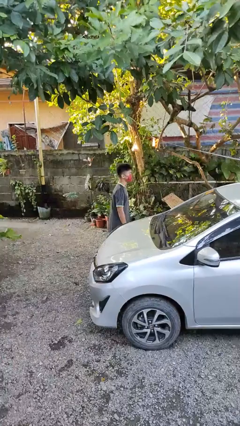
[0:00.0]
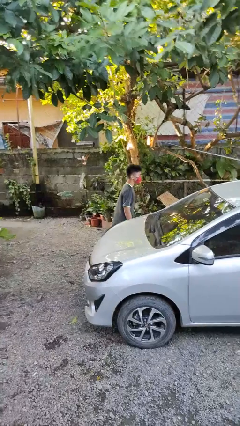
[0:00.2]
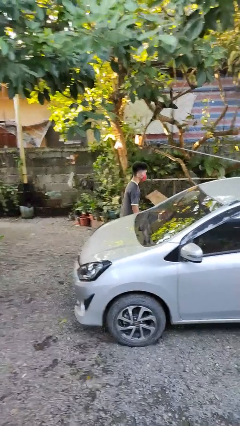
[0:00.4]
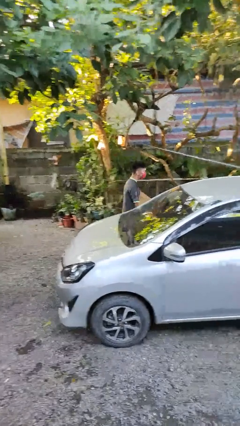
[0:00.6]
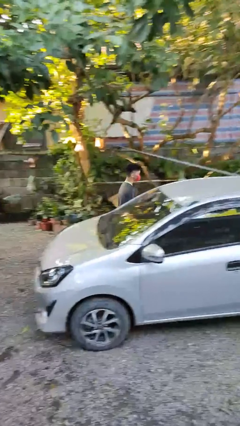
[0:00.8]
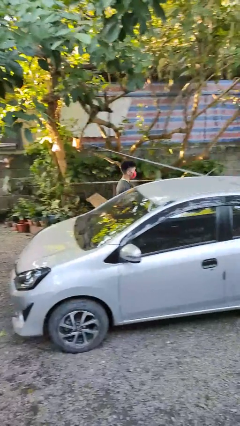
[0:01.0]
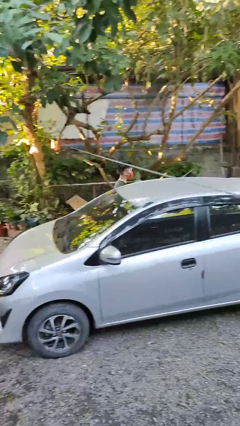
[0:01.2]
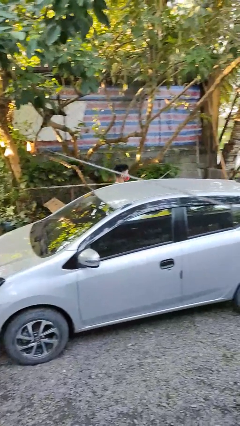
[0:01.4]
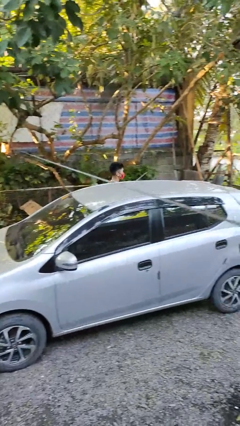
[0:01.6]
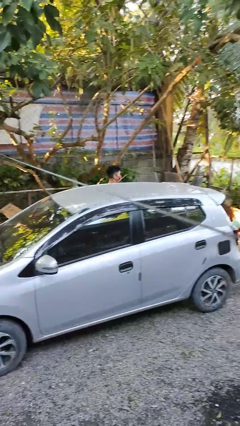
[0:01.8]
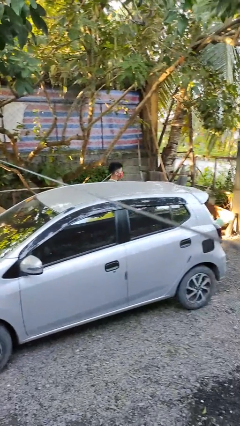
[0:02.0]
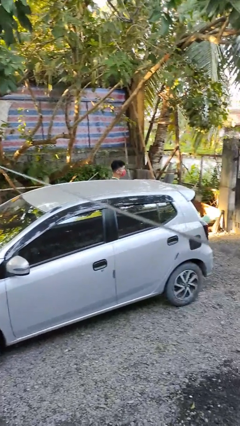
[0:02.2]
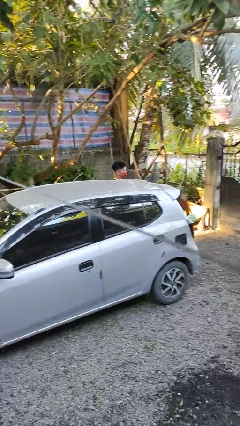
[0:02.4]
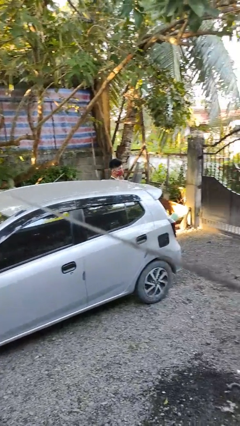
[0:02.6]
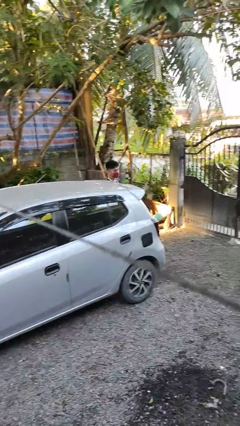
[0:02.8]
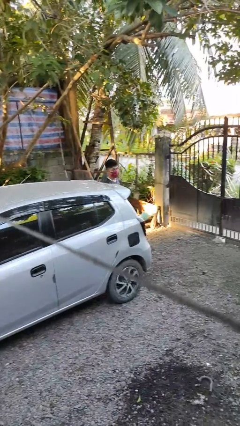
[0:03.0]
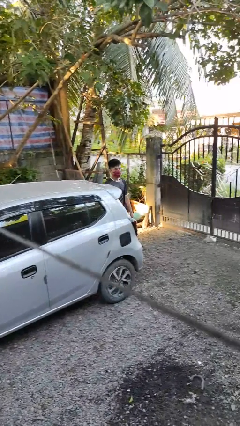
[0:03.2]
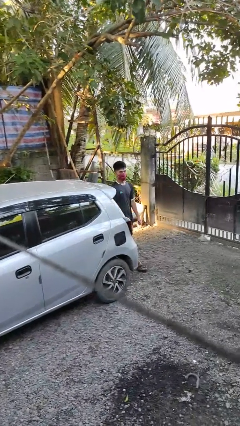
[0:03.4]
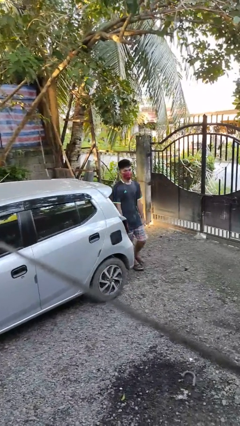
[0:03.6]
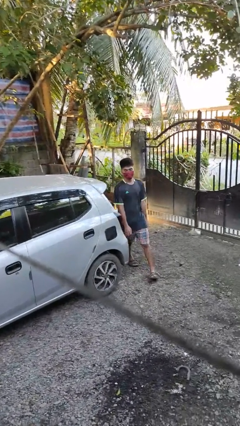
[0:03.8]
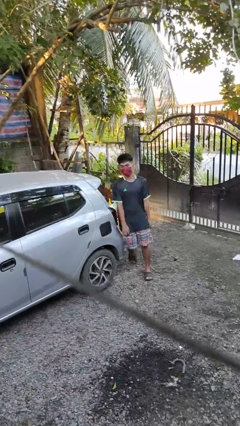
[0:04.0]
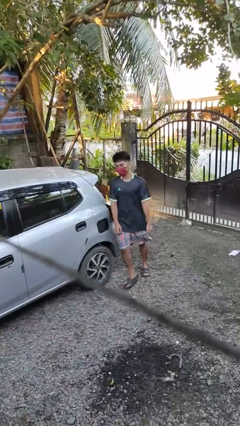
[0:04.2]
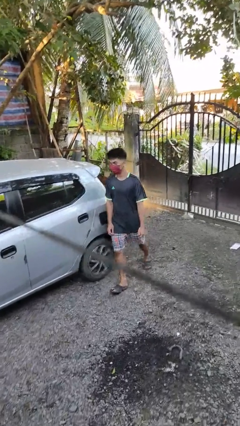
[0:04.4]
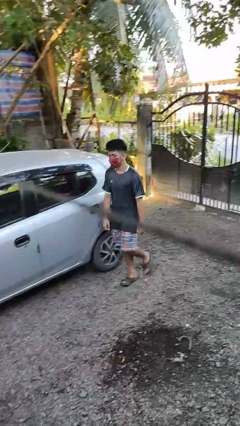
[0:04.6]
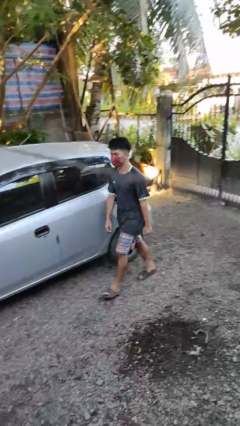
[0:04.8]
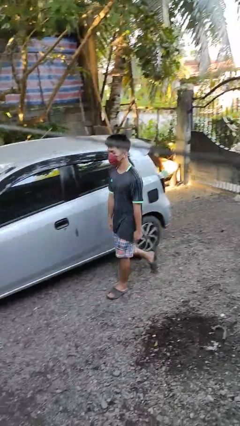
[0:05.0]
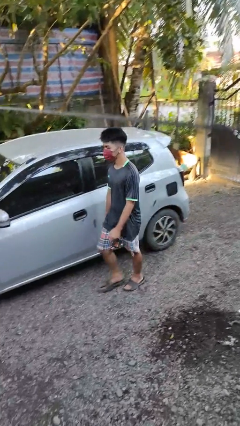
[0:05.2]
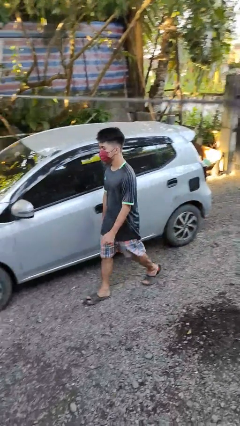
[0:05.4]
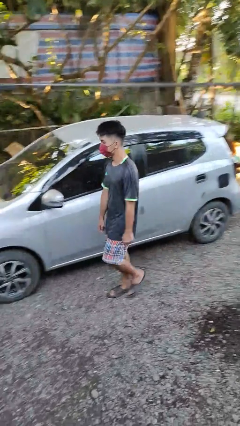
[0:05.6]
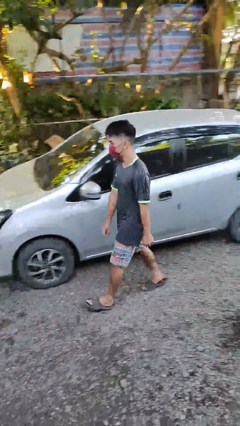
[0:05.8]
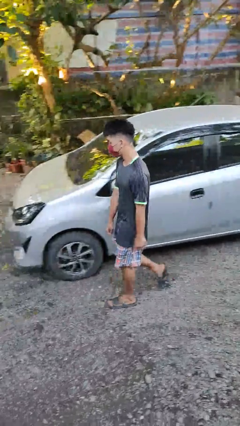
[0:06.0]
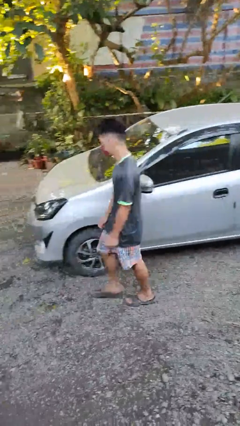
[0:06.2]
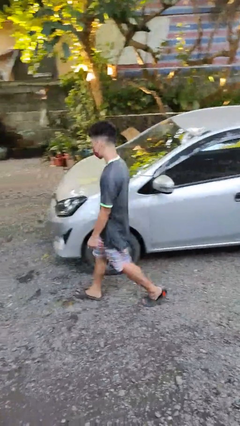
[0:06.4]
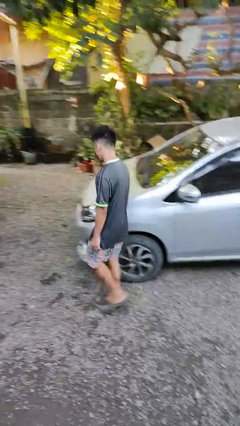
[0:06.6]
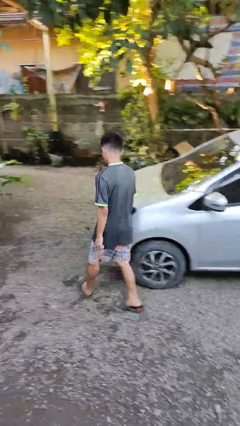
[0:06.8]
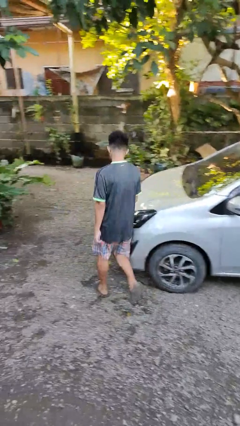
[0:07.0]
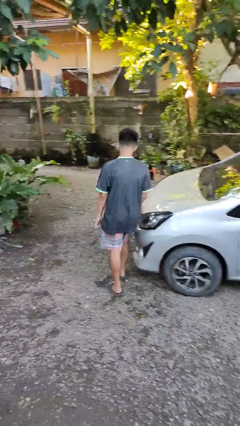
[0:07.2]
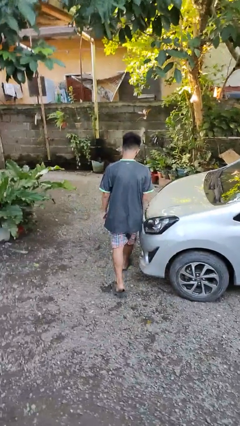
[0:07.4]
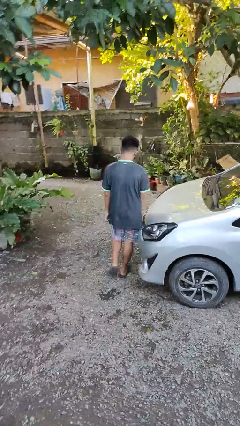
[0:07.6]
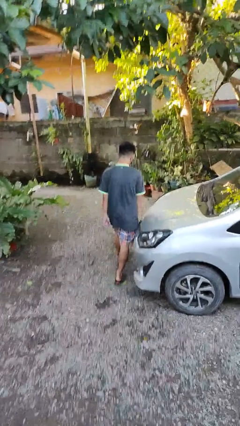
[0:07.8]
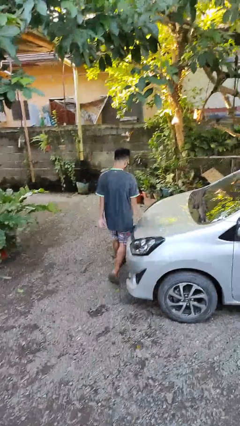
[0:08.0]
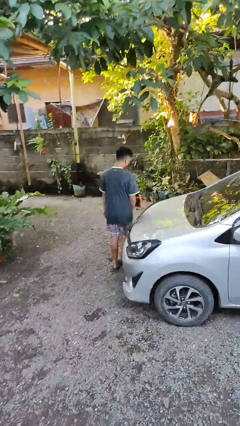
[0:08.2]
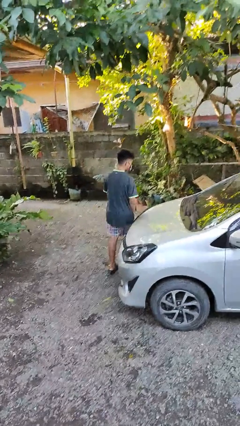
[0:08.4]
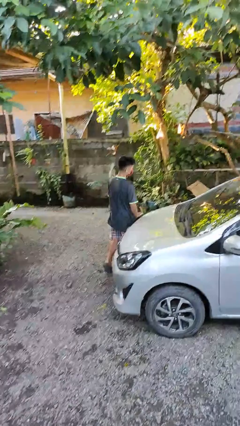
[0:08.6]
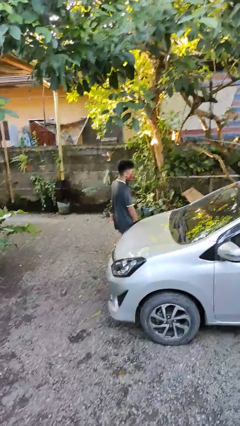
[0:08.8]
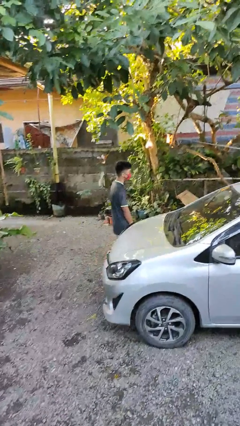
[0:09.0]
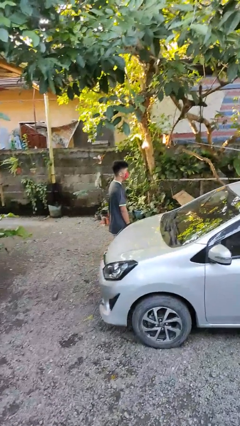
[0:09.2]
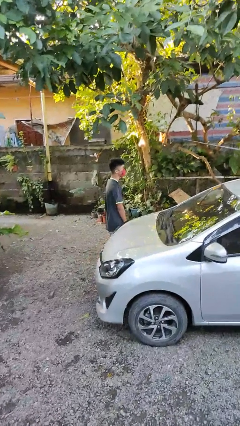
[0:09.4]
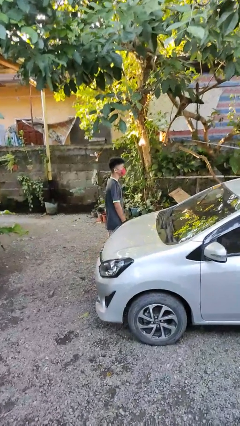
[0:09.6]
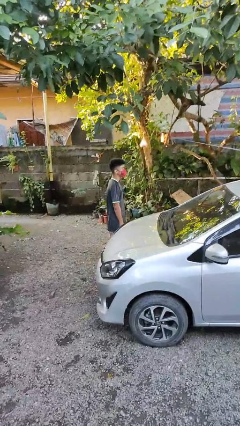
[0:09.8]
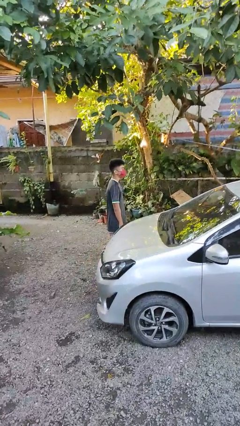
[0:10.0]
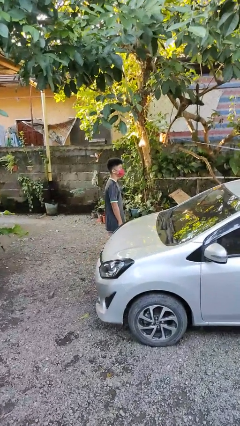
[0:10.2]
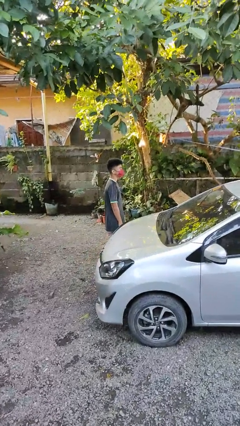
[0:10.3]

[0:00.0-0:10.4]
person walks around car

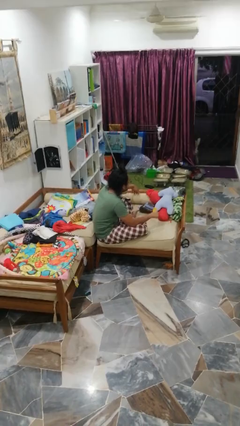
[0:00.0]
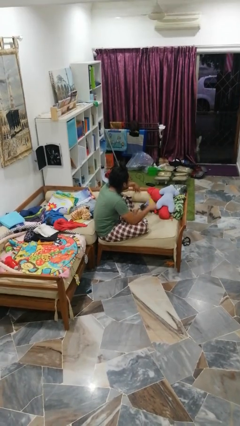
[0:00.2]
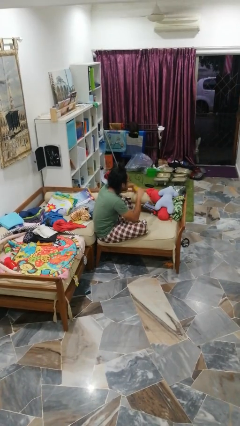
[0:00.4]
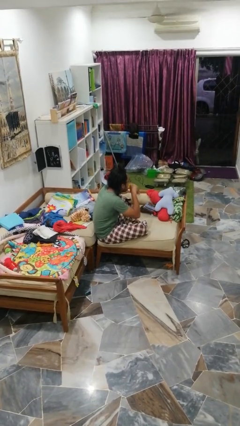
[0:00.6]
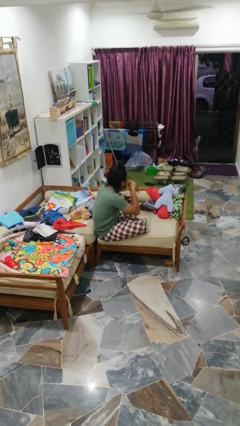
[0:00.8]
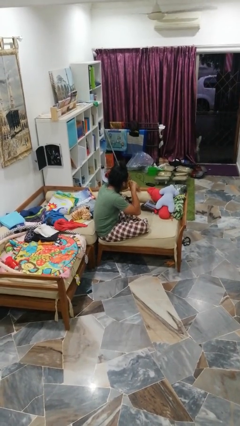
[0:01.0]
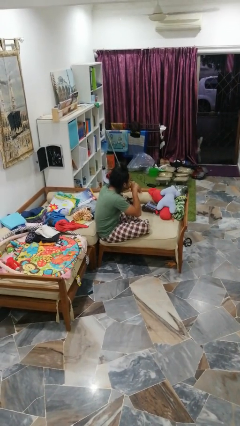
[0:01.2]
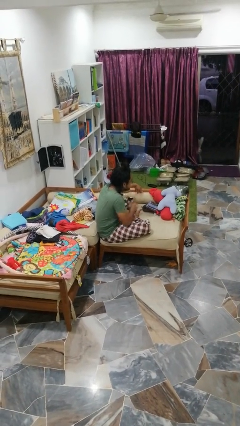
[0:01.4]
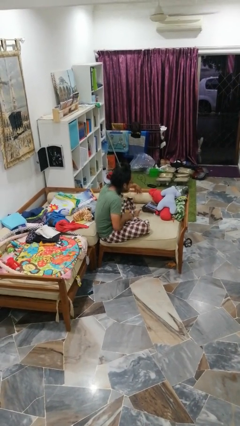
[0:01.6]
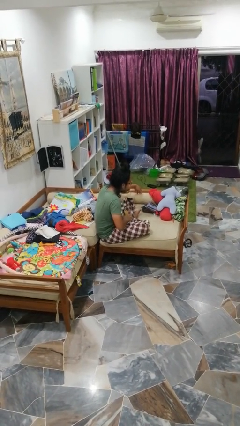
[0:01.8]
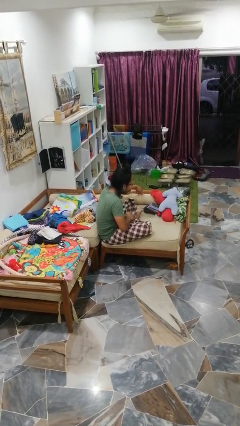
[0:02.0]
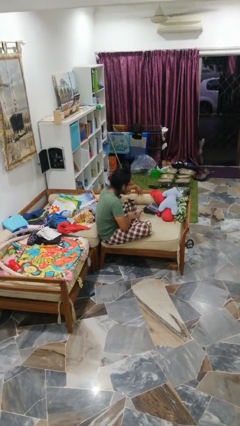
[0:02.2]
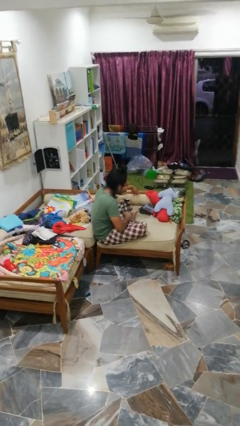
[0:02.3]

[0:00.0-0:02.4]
person eats banana

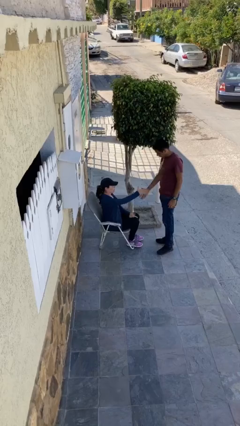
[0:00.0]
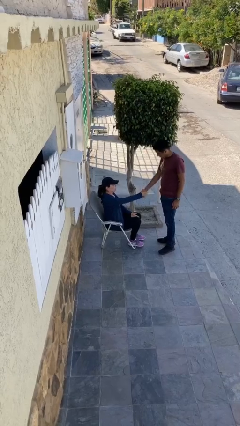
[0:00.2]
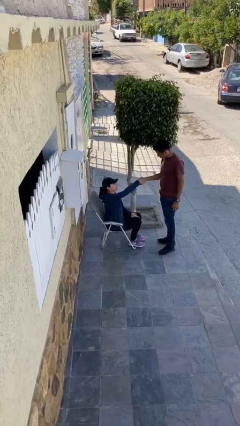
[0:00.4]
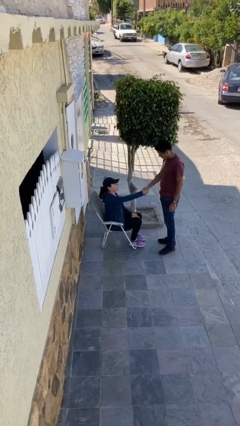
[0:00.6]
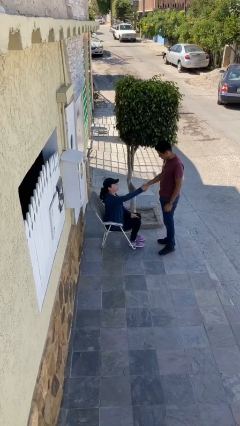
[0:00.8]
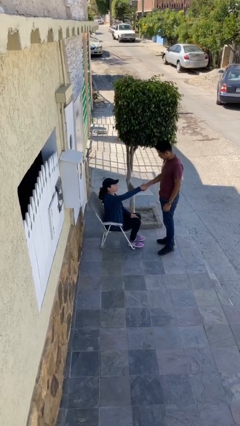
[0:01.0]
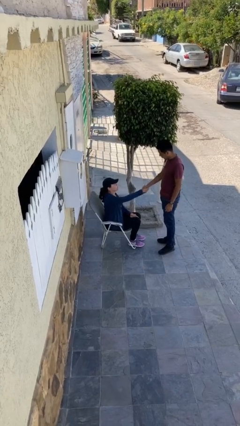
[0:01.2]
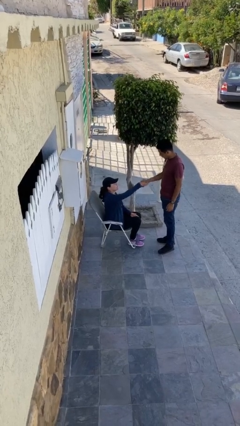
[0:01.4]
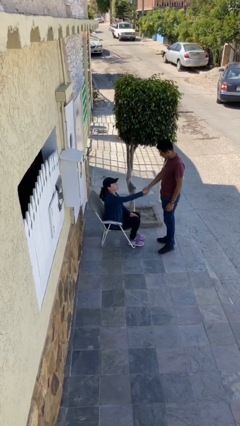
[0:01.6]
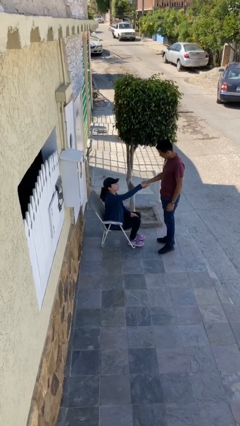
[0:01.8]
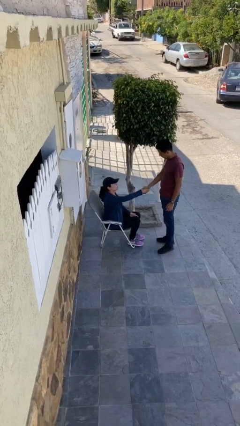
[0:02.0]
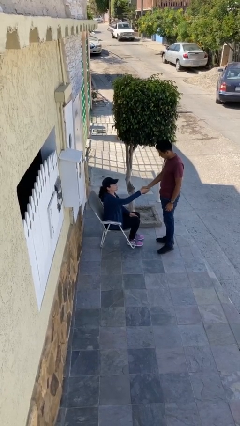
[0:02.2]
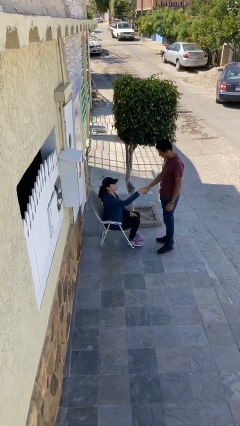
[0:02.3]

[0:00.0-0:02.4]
person shakes hand

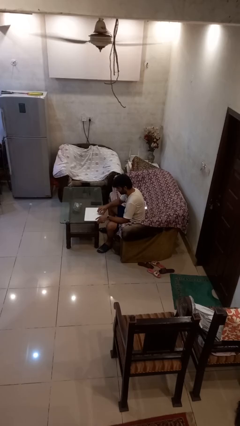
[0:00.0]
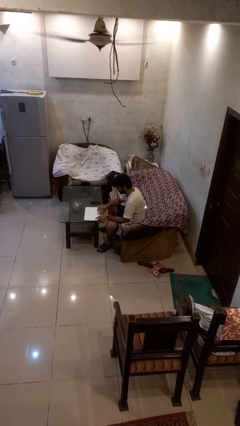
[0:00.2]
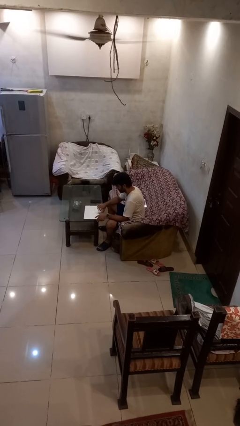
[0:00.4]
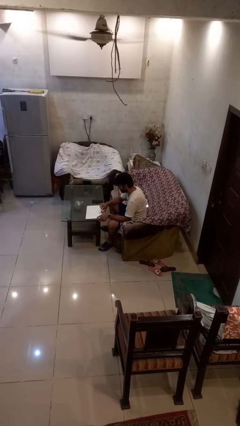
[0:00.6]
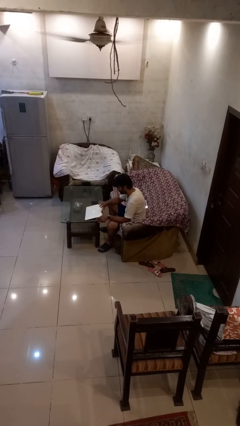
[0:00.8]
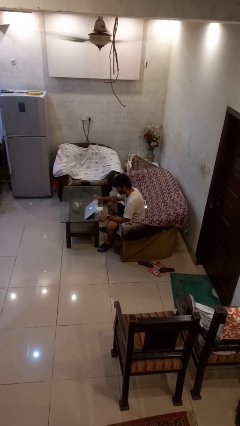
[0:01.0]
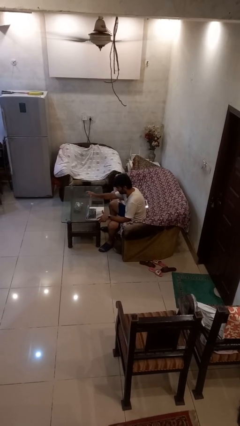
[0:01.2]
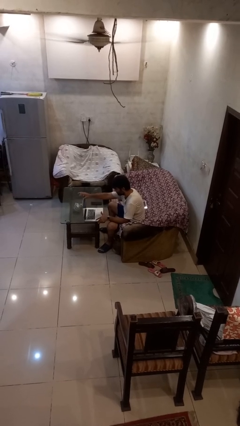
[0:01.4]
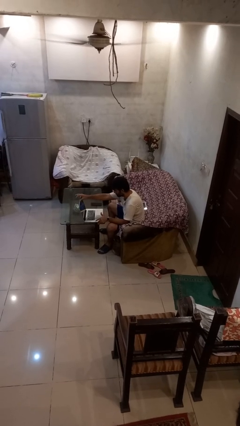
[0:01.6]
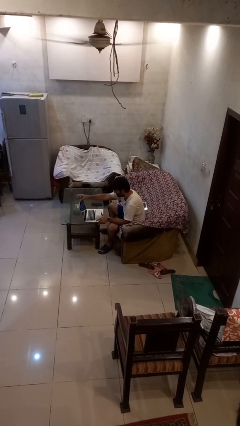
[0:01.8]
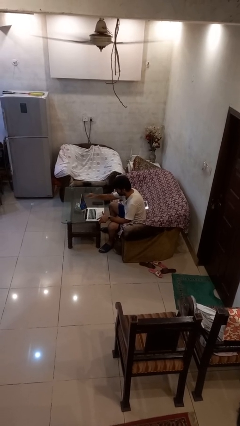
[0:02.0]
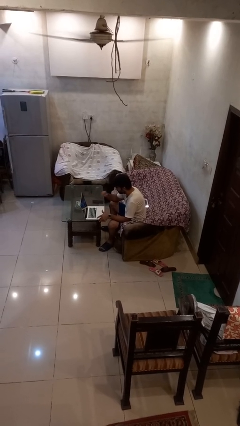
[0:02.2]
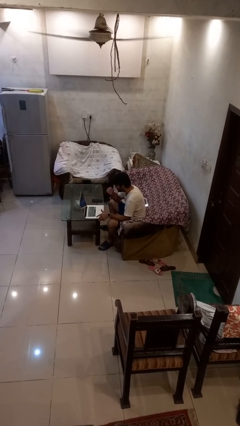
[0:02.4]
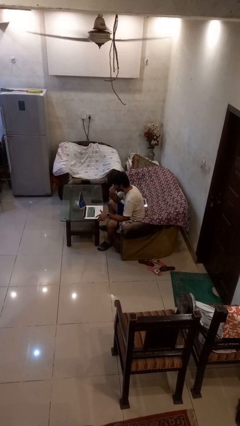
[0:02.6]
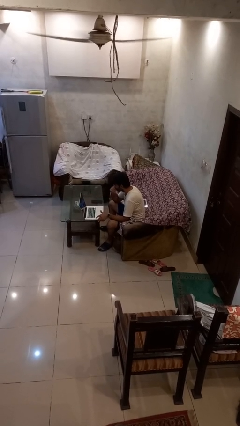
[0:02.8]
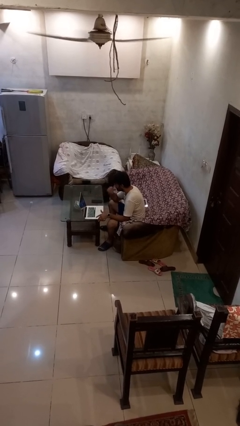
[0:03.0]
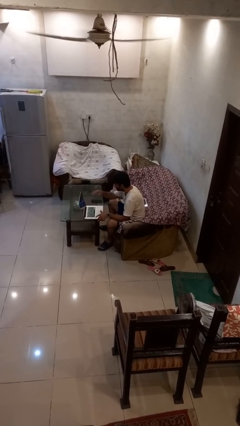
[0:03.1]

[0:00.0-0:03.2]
person opens laptop
